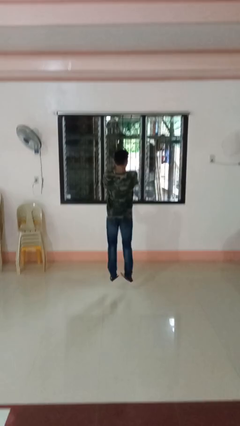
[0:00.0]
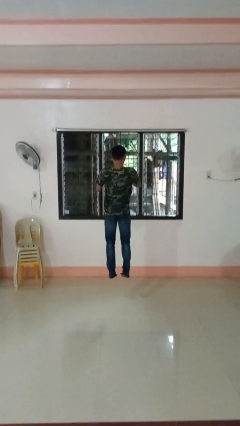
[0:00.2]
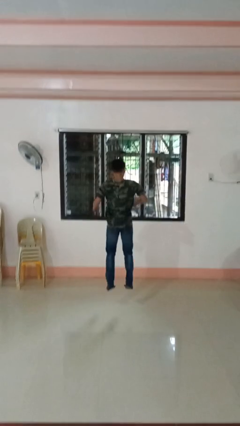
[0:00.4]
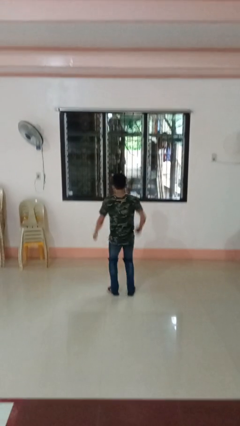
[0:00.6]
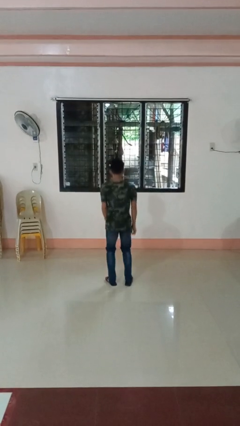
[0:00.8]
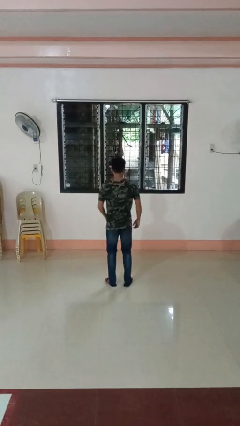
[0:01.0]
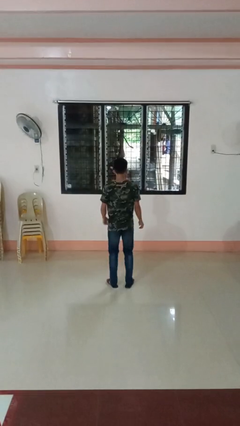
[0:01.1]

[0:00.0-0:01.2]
person jumps

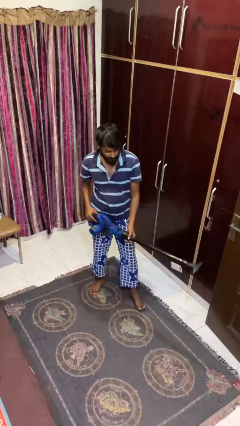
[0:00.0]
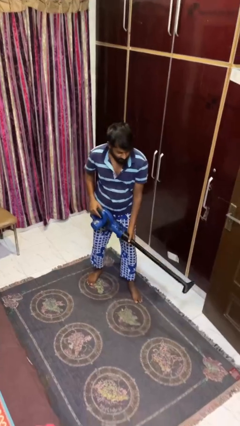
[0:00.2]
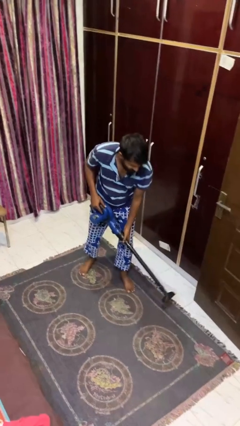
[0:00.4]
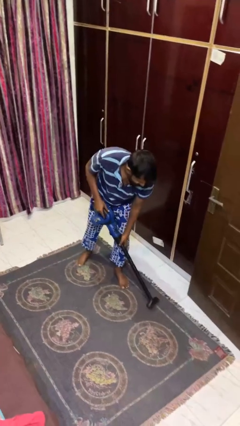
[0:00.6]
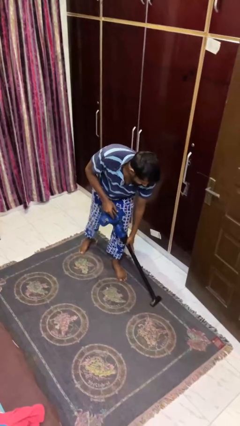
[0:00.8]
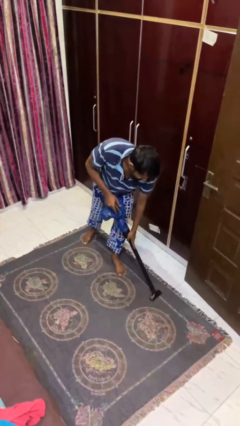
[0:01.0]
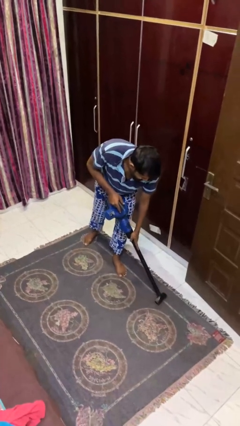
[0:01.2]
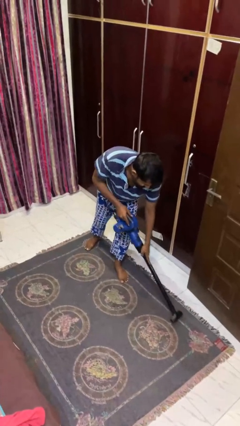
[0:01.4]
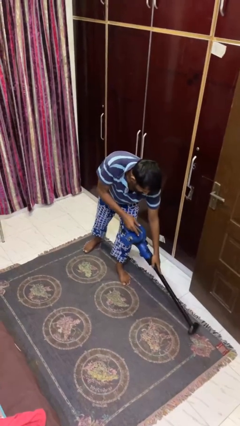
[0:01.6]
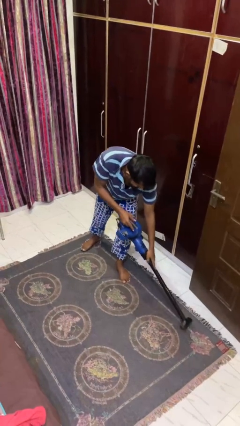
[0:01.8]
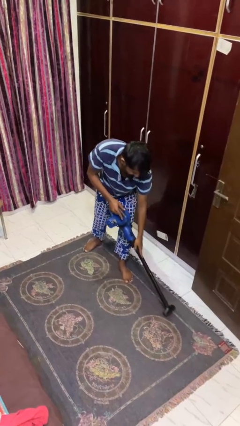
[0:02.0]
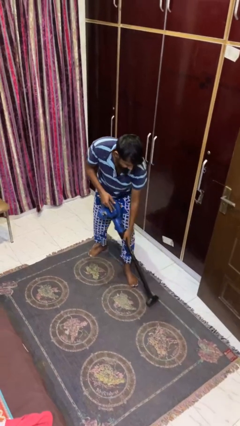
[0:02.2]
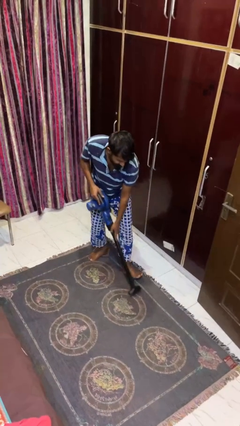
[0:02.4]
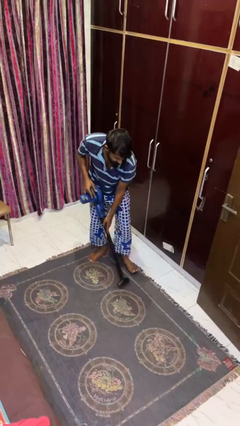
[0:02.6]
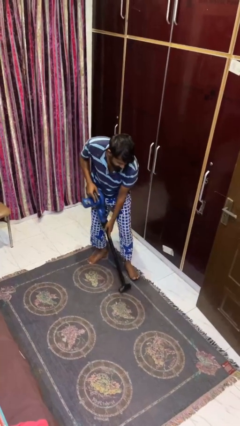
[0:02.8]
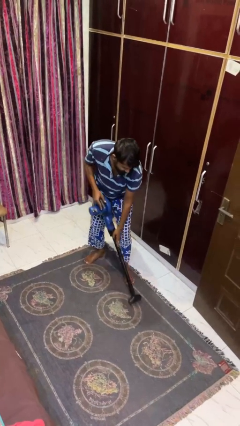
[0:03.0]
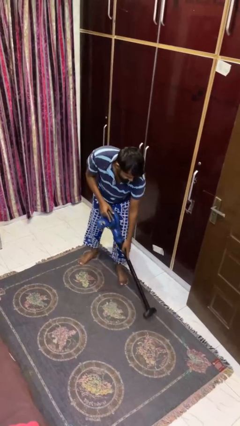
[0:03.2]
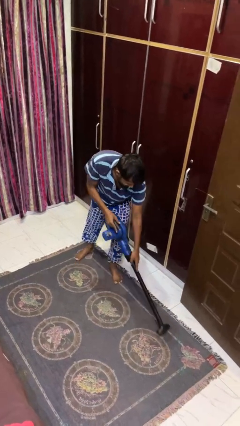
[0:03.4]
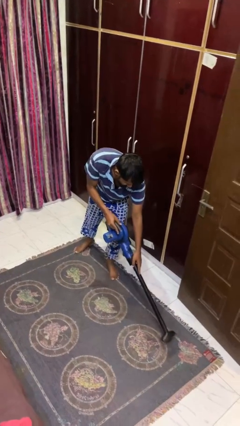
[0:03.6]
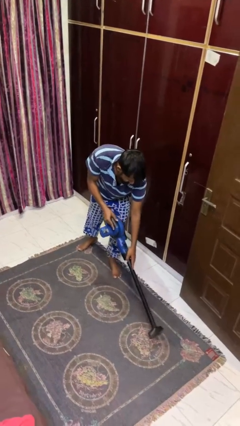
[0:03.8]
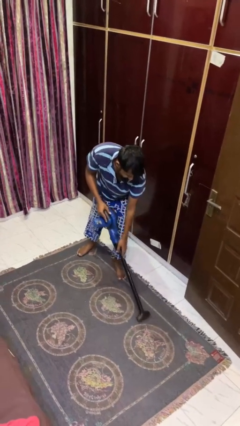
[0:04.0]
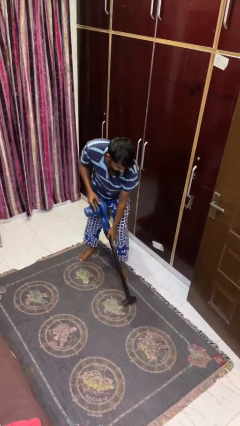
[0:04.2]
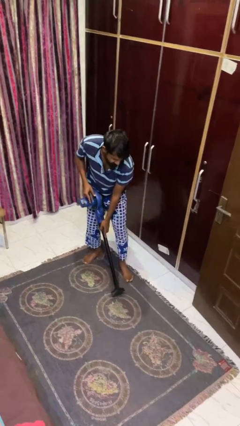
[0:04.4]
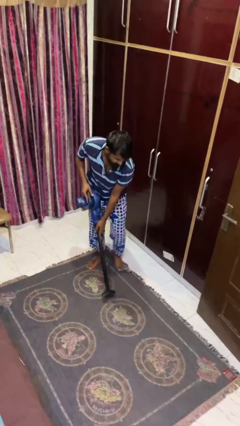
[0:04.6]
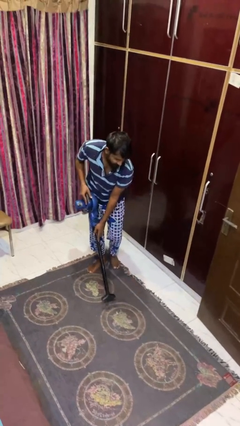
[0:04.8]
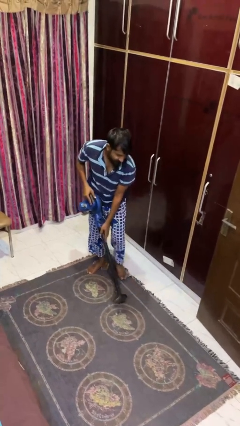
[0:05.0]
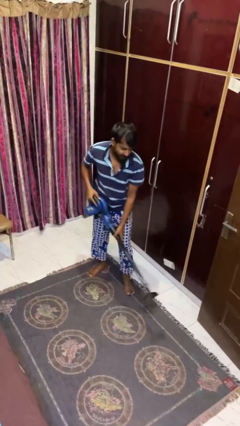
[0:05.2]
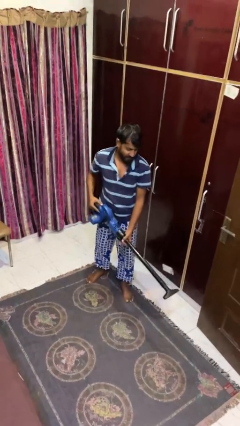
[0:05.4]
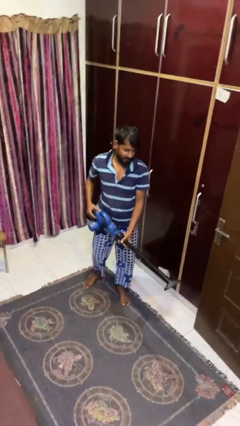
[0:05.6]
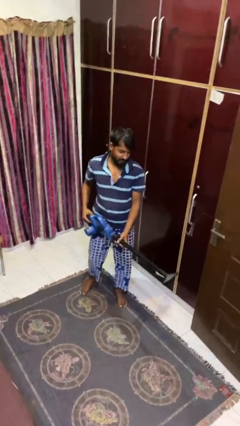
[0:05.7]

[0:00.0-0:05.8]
person vacuums carpet

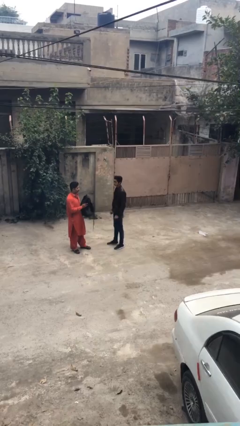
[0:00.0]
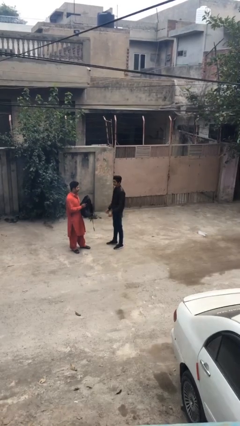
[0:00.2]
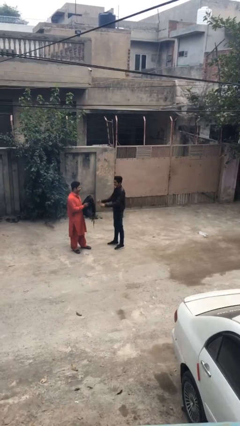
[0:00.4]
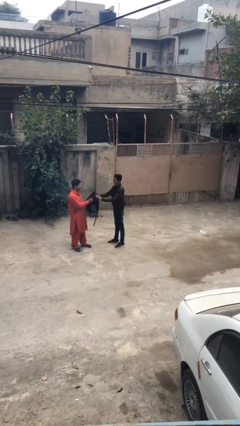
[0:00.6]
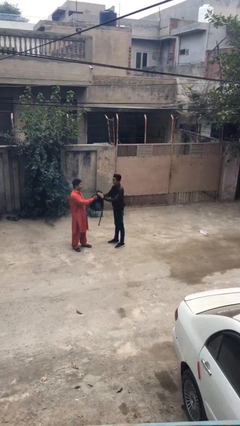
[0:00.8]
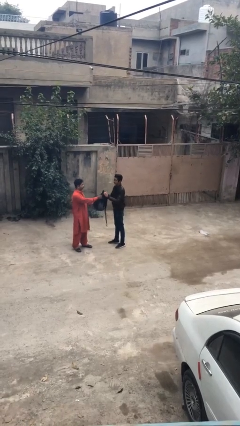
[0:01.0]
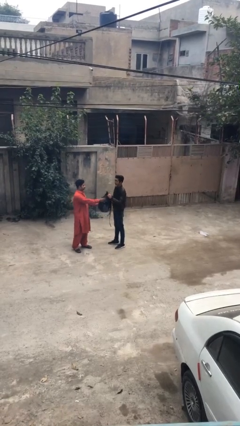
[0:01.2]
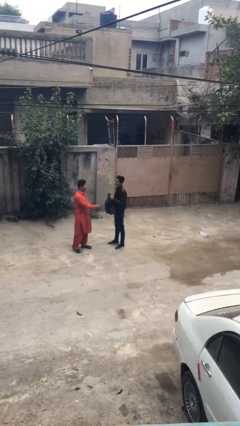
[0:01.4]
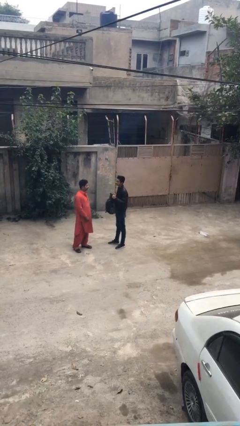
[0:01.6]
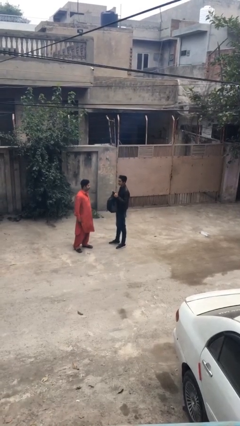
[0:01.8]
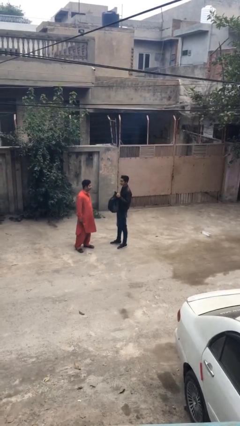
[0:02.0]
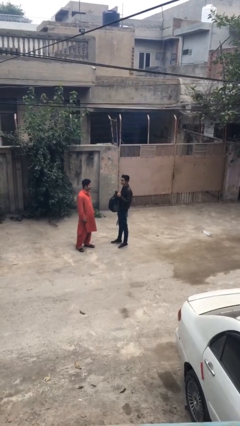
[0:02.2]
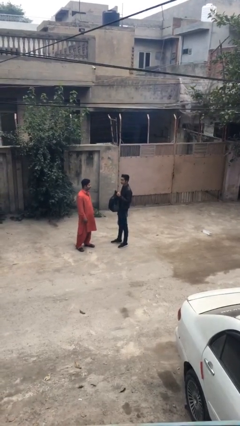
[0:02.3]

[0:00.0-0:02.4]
person transfers object to person

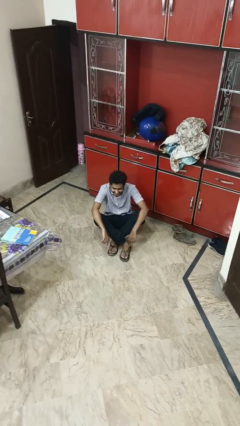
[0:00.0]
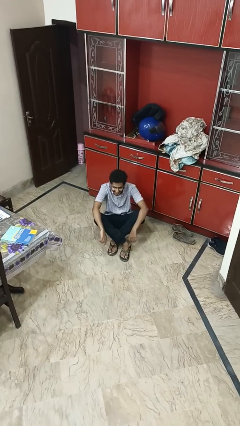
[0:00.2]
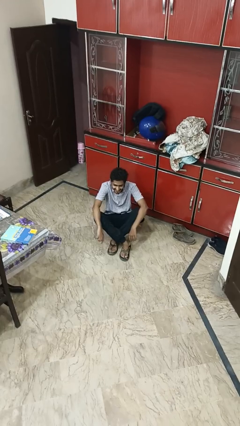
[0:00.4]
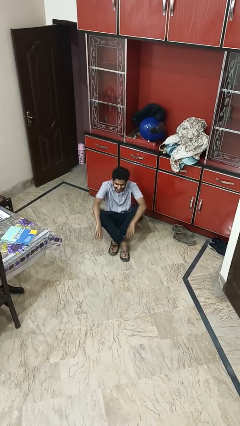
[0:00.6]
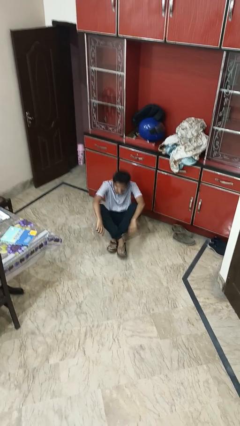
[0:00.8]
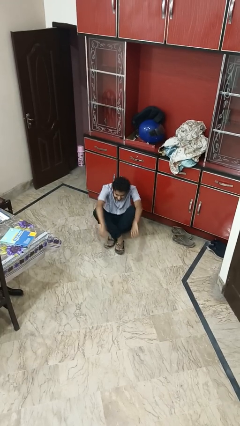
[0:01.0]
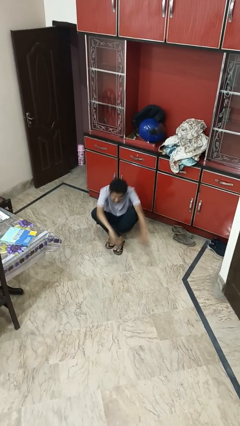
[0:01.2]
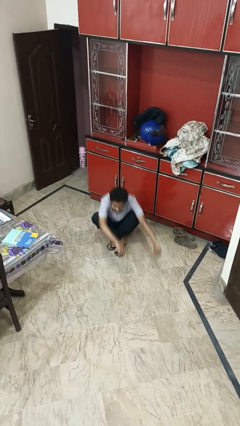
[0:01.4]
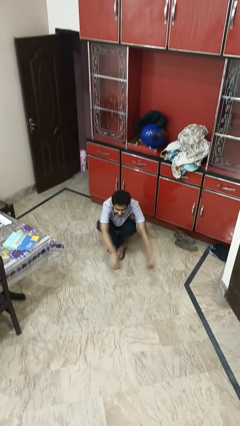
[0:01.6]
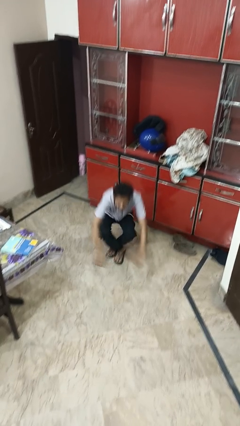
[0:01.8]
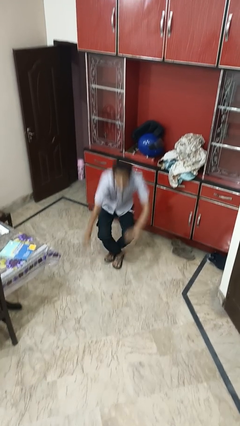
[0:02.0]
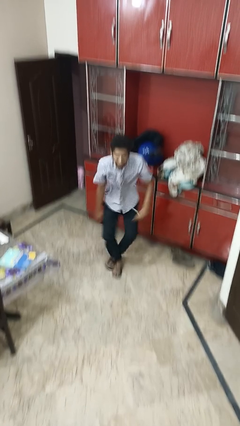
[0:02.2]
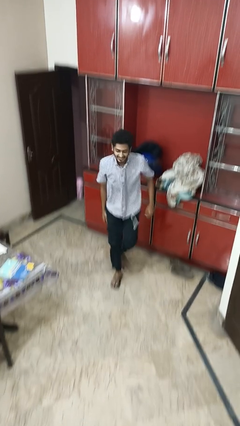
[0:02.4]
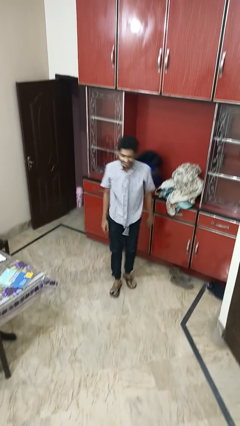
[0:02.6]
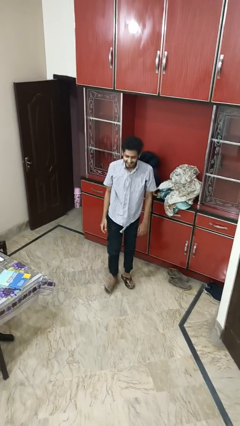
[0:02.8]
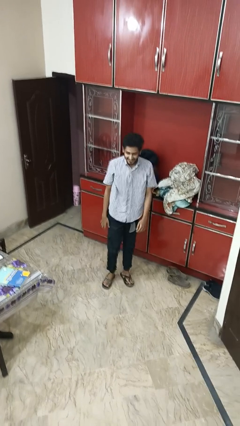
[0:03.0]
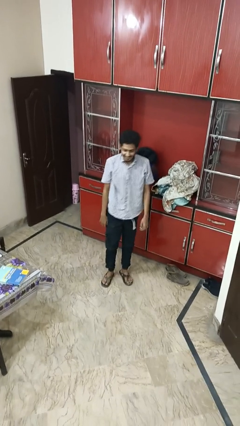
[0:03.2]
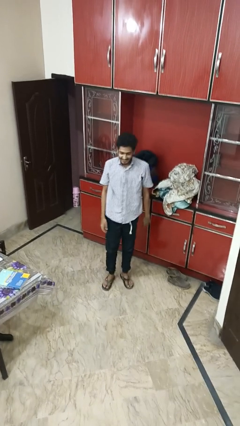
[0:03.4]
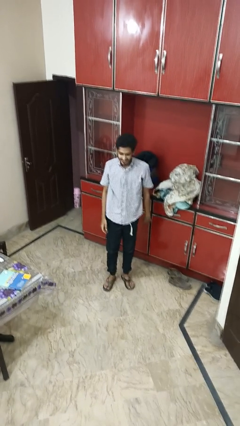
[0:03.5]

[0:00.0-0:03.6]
person stands up from floor

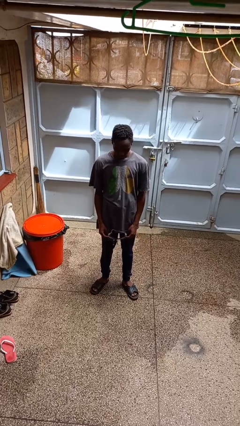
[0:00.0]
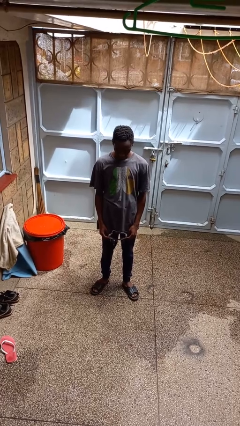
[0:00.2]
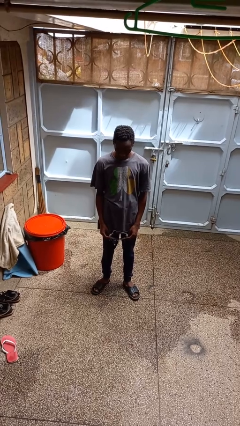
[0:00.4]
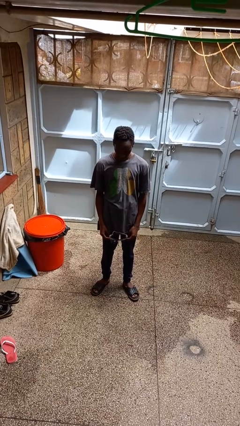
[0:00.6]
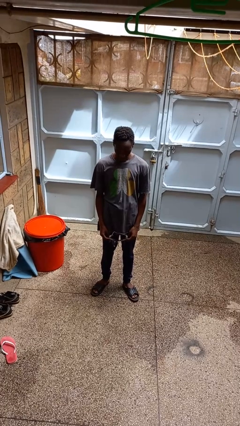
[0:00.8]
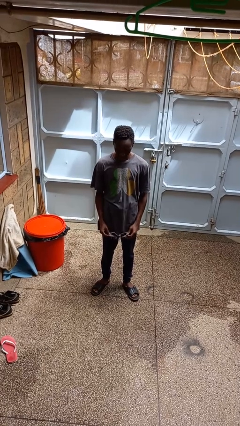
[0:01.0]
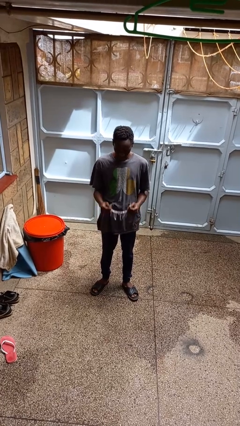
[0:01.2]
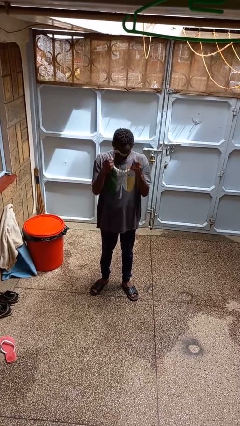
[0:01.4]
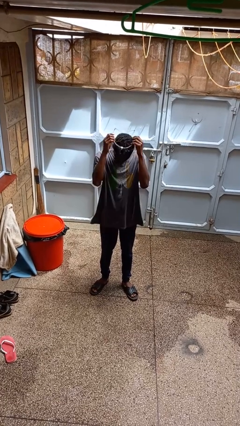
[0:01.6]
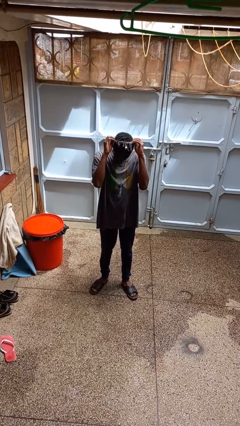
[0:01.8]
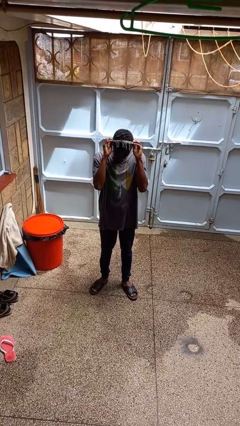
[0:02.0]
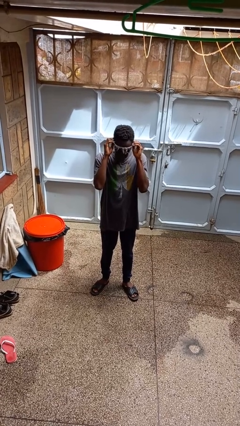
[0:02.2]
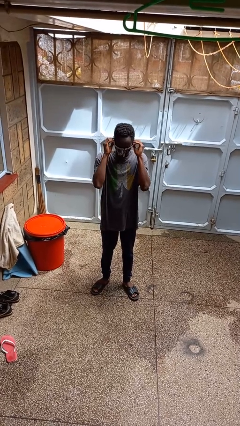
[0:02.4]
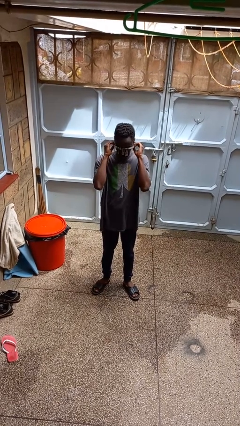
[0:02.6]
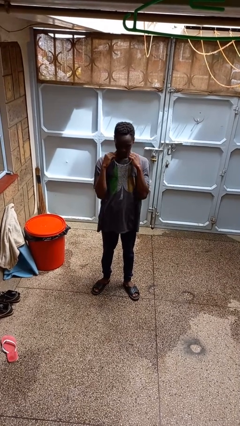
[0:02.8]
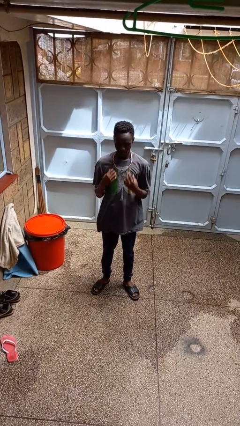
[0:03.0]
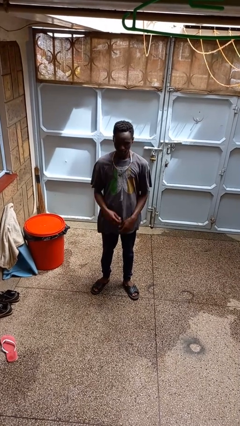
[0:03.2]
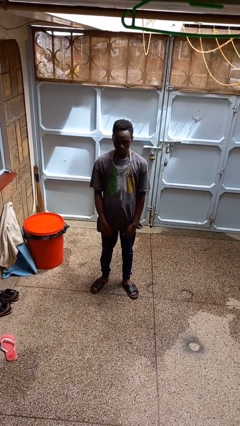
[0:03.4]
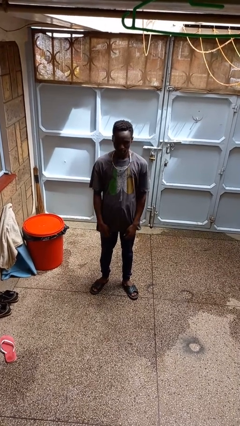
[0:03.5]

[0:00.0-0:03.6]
person puts on necklace

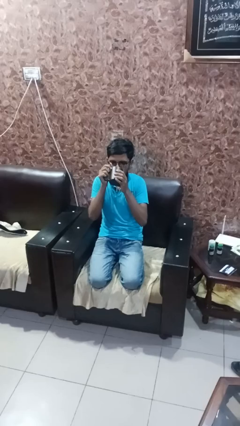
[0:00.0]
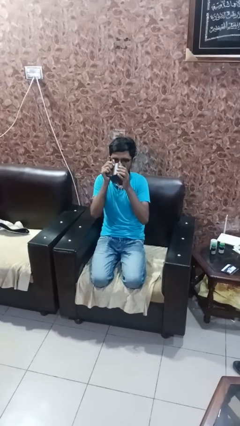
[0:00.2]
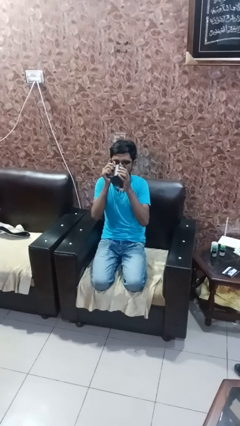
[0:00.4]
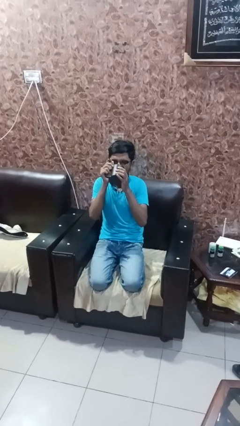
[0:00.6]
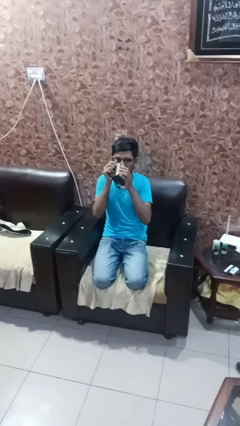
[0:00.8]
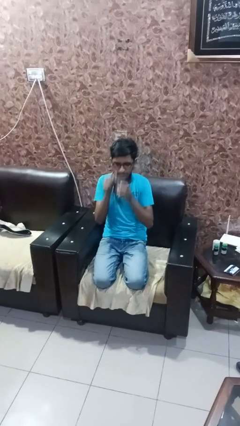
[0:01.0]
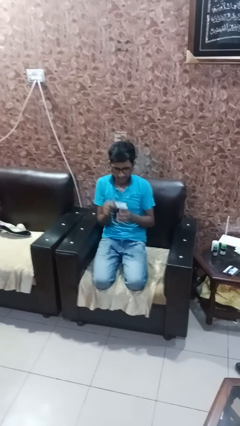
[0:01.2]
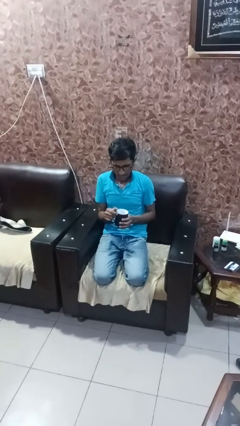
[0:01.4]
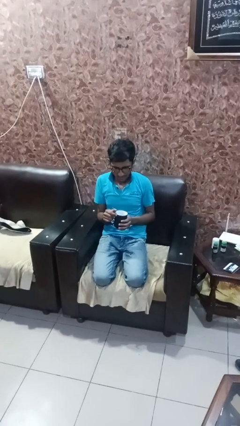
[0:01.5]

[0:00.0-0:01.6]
person drinks from mug
